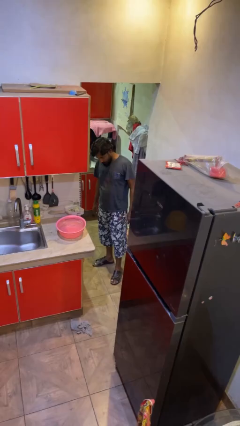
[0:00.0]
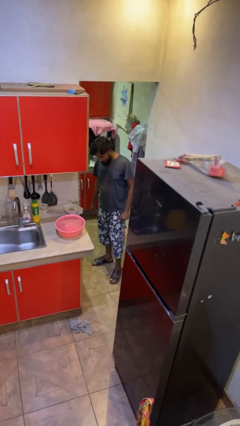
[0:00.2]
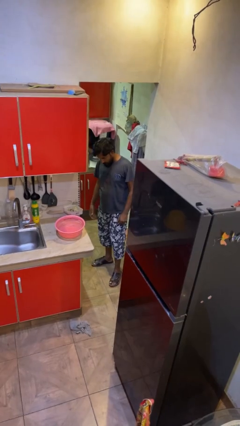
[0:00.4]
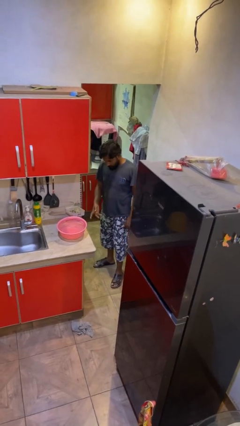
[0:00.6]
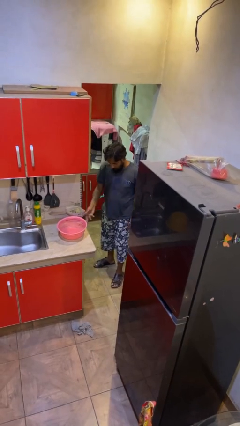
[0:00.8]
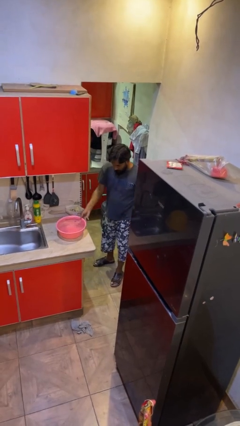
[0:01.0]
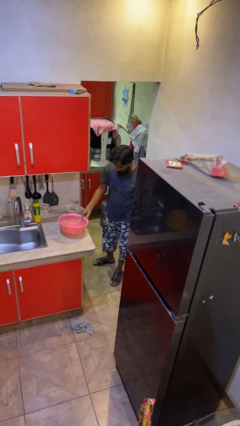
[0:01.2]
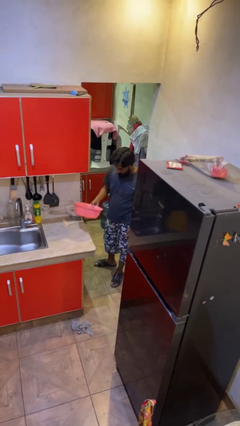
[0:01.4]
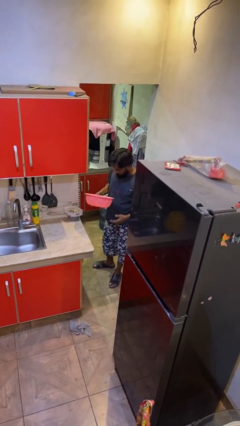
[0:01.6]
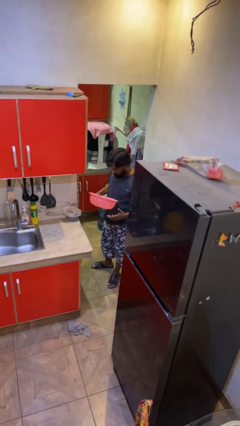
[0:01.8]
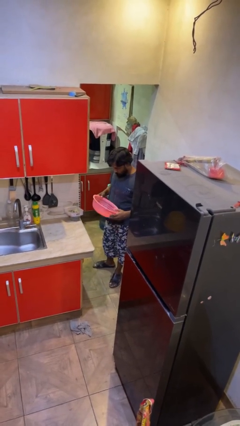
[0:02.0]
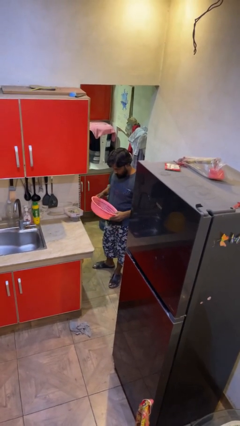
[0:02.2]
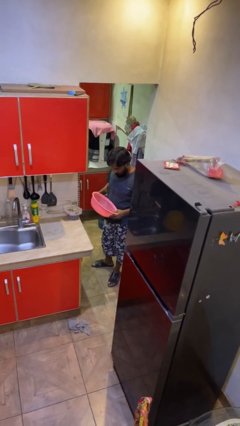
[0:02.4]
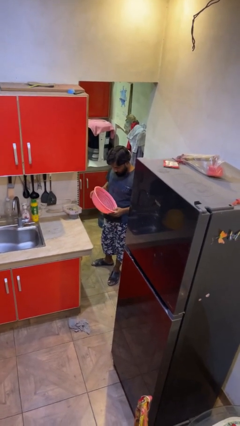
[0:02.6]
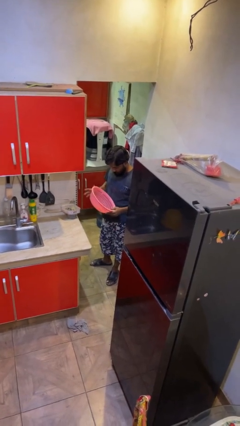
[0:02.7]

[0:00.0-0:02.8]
person picks up object from countertop

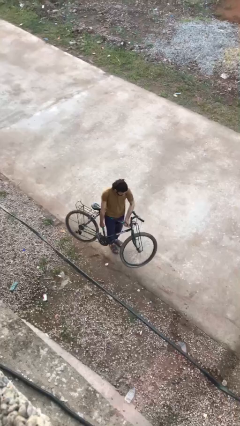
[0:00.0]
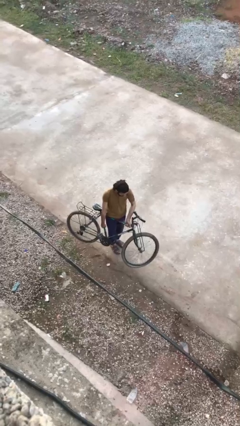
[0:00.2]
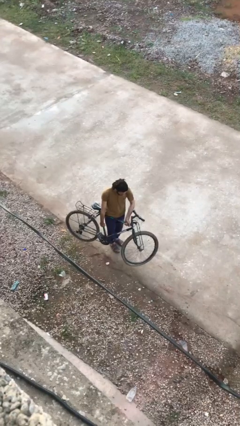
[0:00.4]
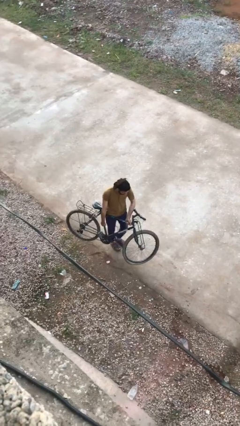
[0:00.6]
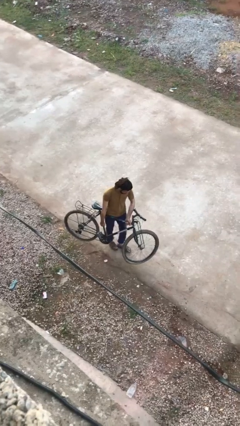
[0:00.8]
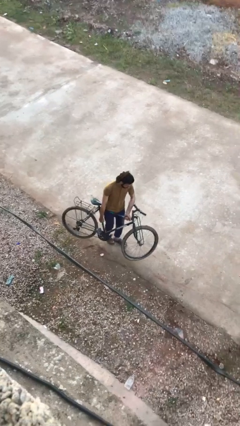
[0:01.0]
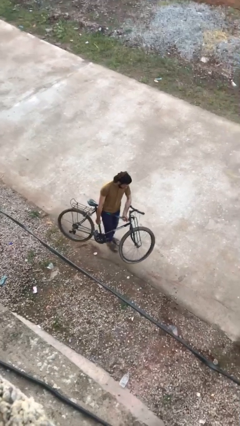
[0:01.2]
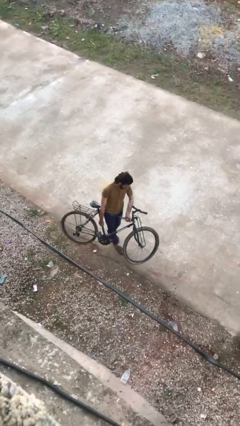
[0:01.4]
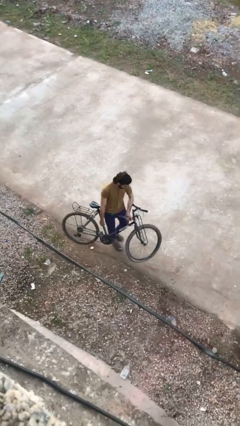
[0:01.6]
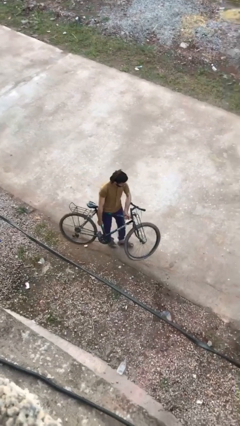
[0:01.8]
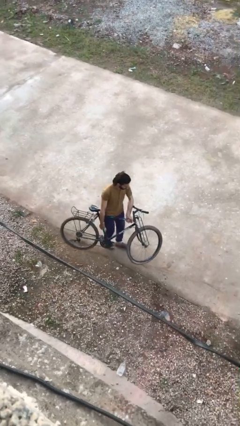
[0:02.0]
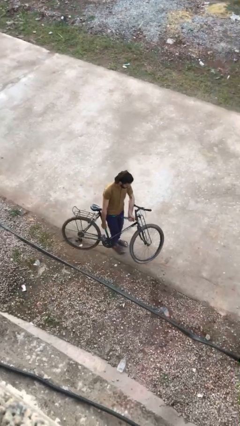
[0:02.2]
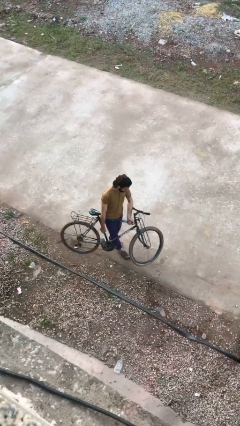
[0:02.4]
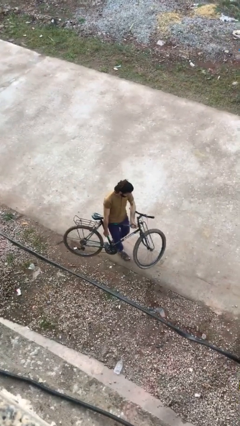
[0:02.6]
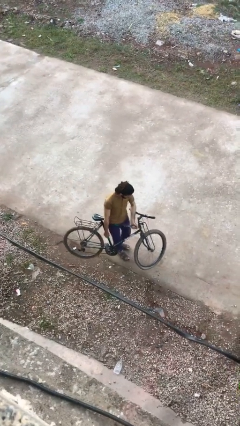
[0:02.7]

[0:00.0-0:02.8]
person carries bicycle

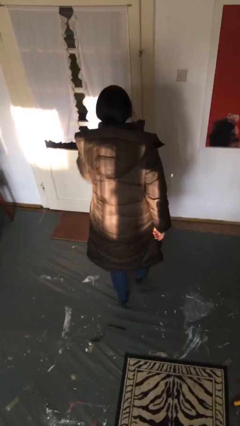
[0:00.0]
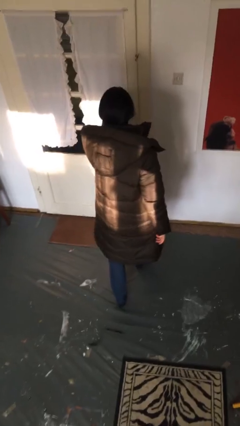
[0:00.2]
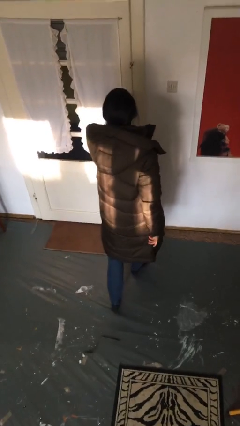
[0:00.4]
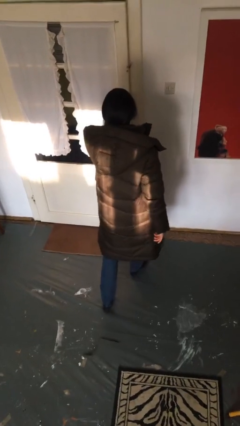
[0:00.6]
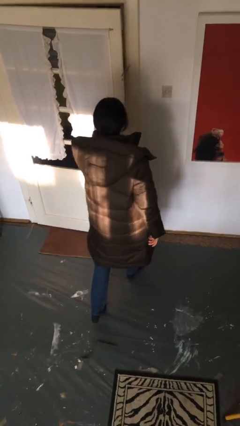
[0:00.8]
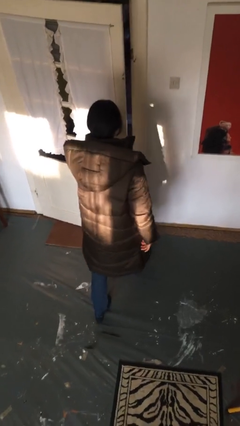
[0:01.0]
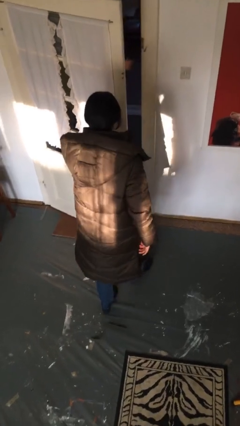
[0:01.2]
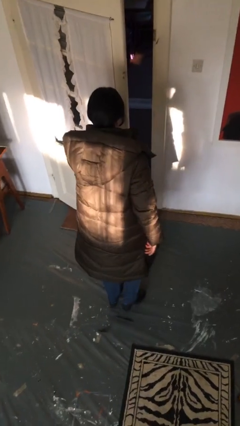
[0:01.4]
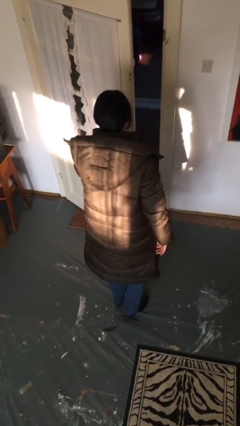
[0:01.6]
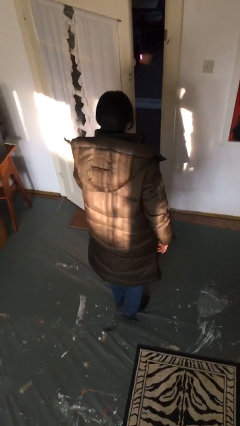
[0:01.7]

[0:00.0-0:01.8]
person opens facility door

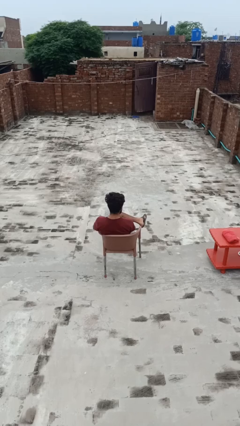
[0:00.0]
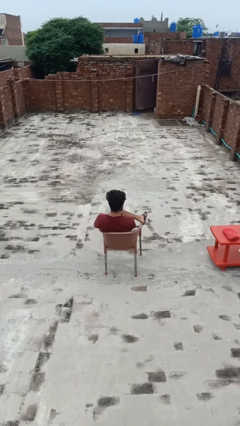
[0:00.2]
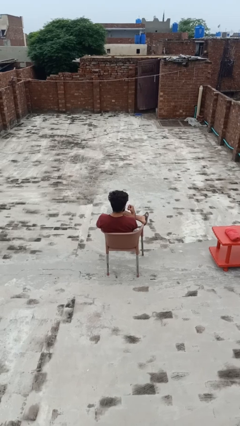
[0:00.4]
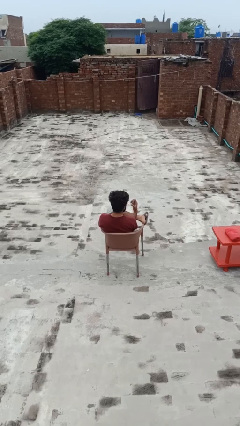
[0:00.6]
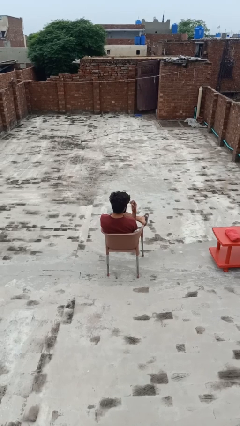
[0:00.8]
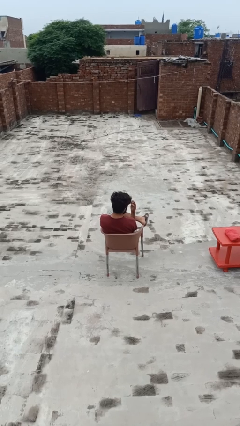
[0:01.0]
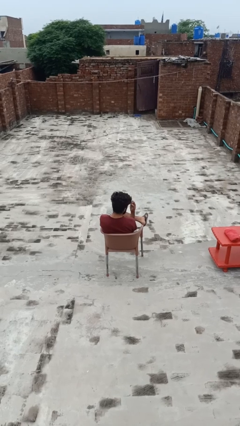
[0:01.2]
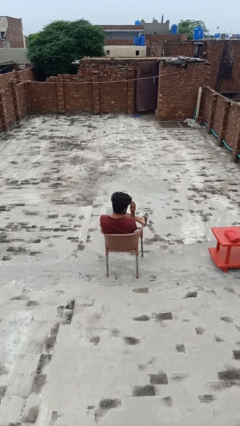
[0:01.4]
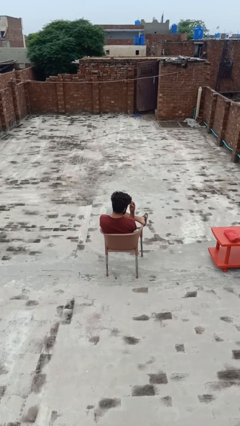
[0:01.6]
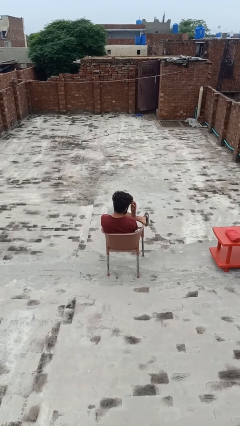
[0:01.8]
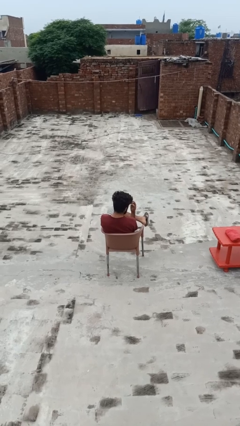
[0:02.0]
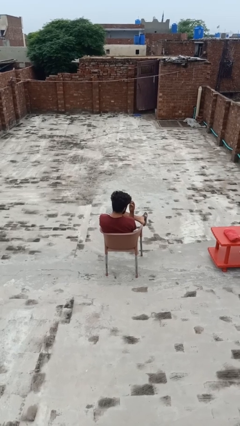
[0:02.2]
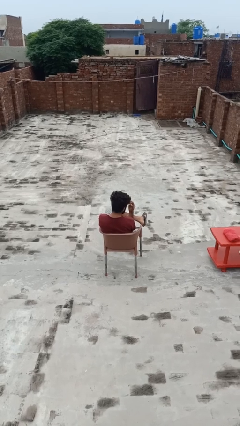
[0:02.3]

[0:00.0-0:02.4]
person paints fingernails

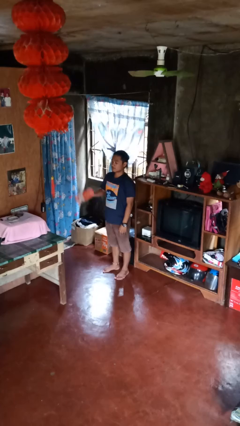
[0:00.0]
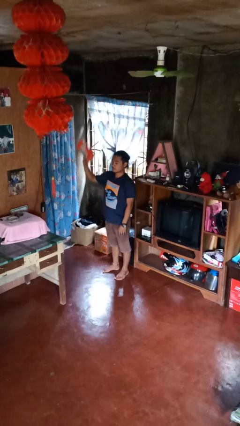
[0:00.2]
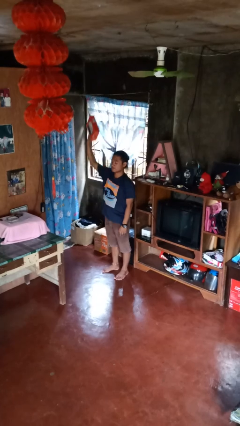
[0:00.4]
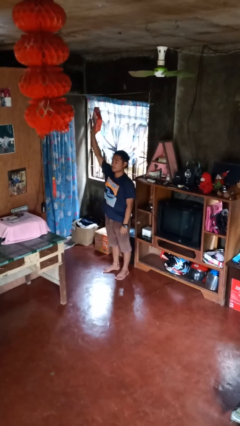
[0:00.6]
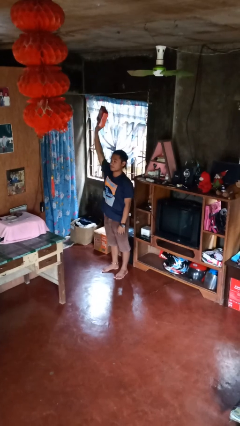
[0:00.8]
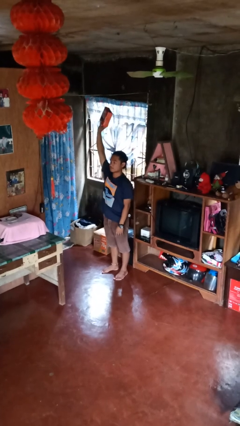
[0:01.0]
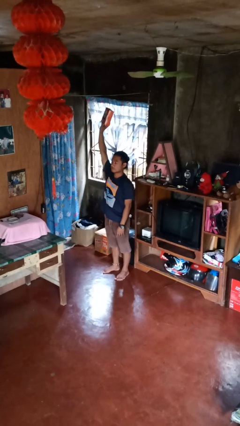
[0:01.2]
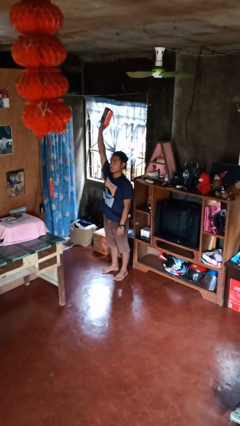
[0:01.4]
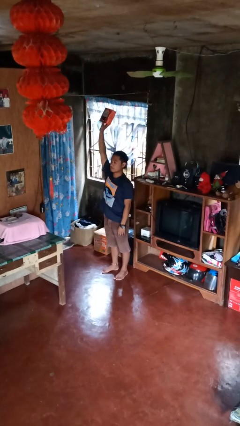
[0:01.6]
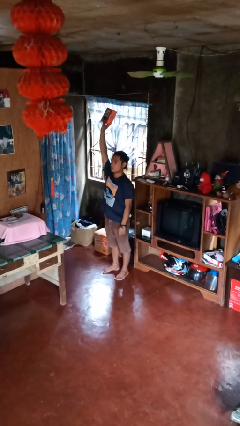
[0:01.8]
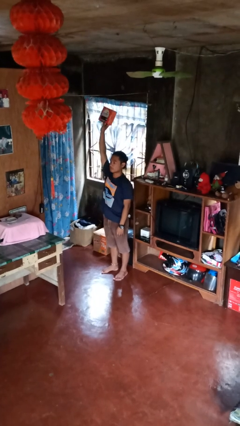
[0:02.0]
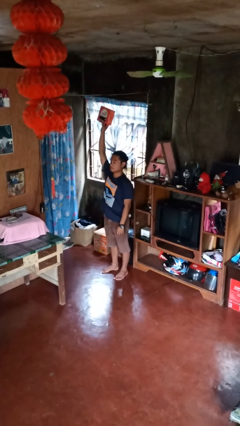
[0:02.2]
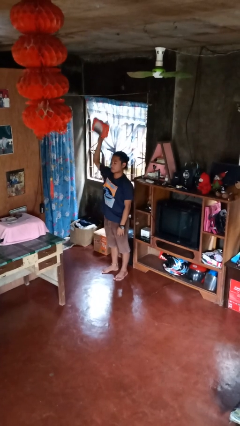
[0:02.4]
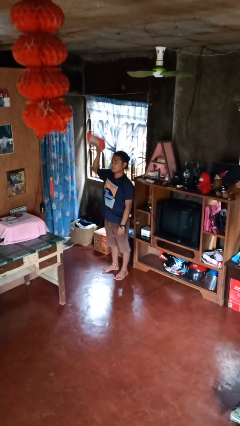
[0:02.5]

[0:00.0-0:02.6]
person holds object above head

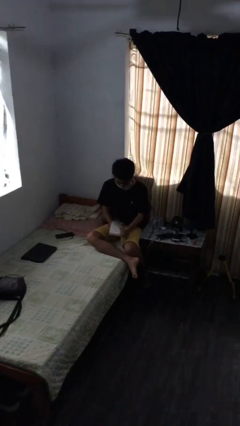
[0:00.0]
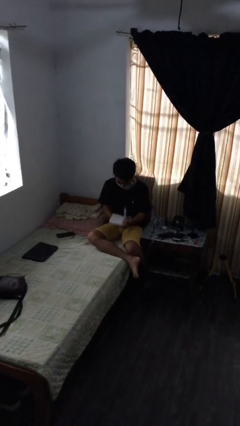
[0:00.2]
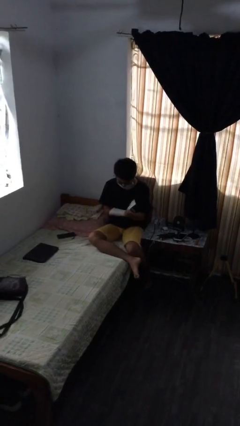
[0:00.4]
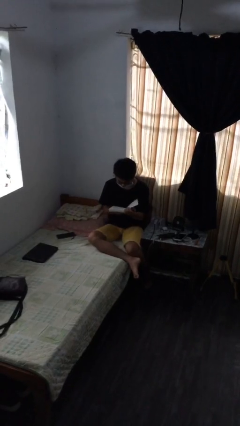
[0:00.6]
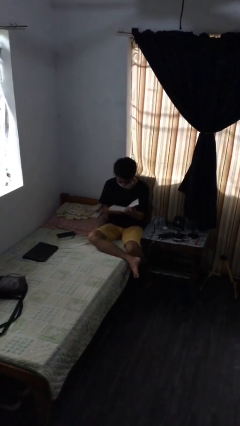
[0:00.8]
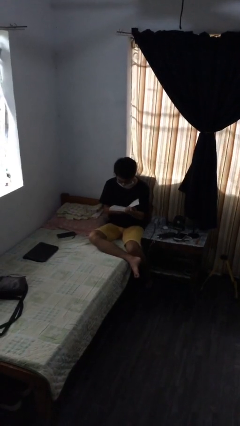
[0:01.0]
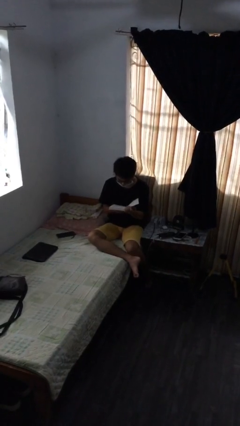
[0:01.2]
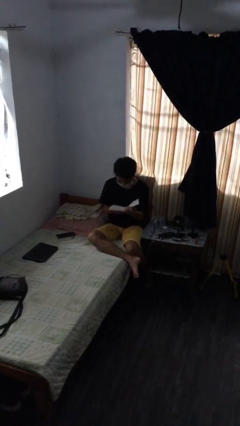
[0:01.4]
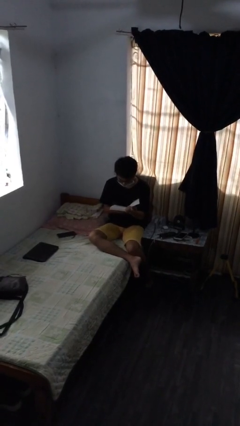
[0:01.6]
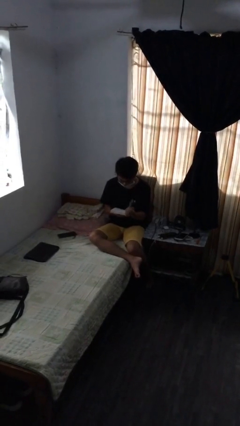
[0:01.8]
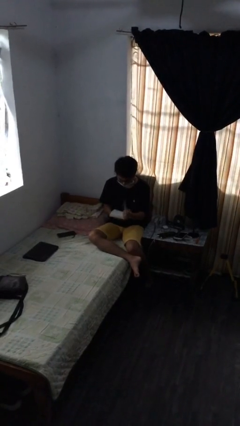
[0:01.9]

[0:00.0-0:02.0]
person reads document

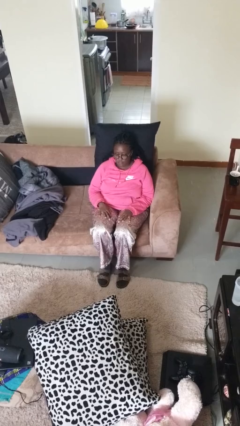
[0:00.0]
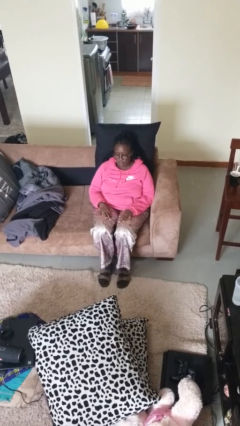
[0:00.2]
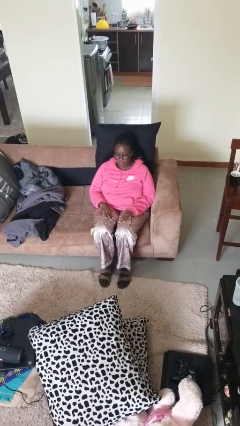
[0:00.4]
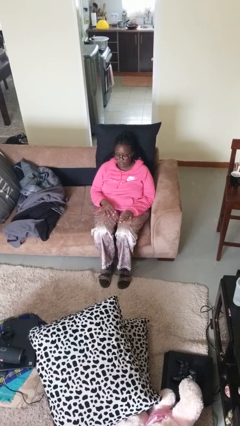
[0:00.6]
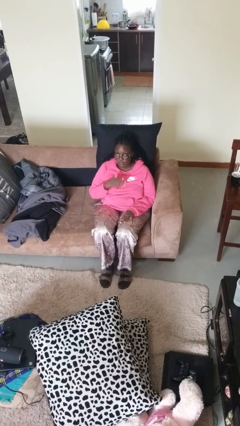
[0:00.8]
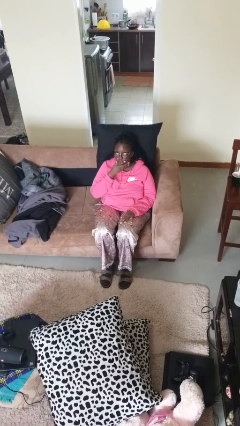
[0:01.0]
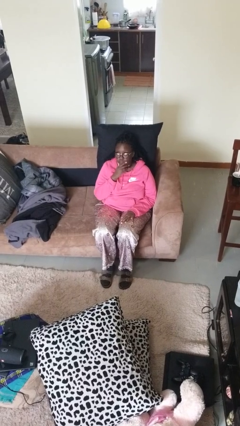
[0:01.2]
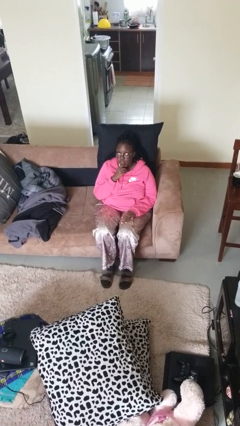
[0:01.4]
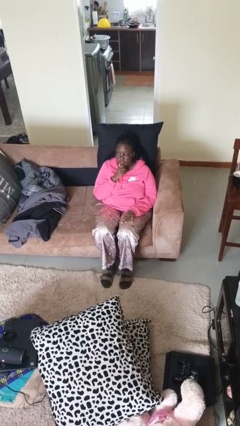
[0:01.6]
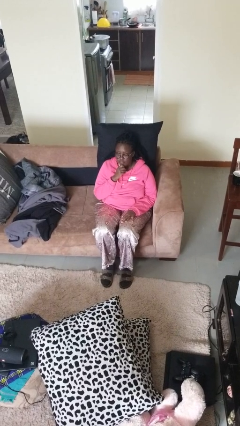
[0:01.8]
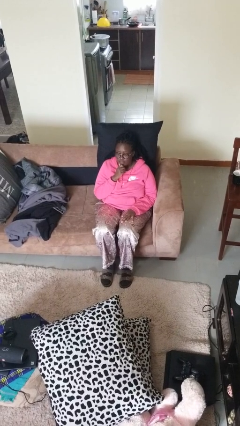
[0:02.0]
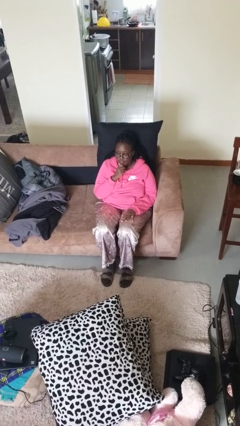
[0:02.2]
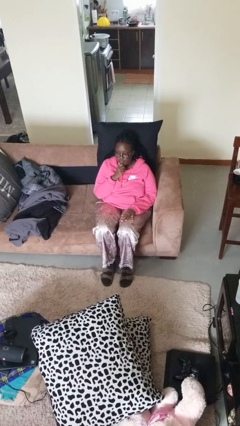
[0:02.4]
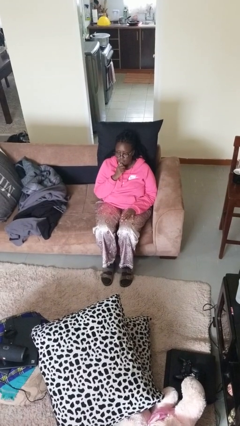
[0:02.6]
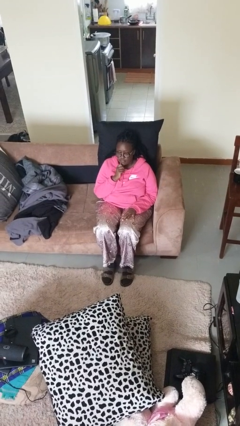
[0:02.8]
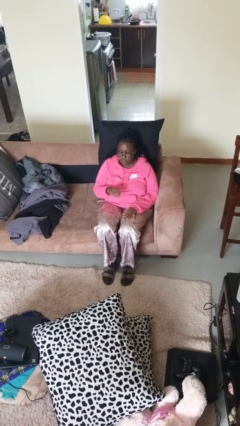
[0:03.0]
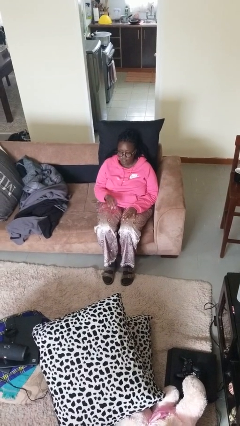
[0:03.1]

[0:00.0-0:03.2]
person strokes chin
